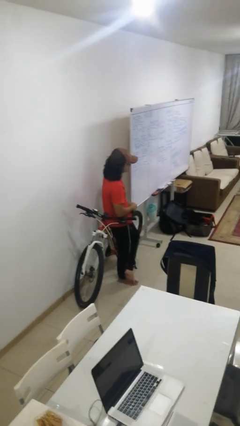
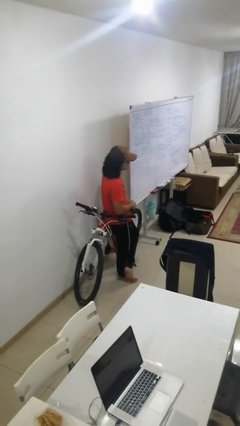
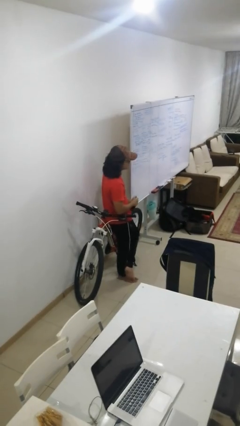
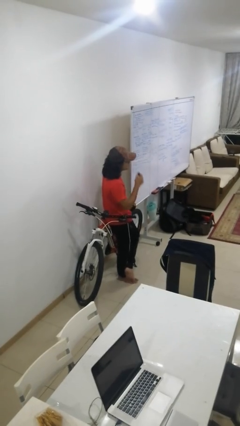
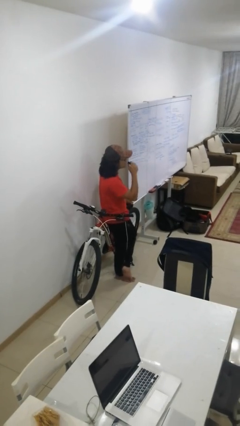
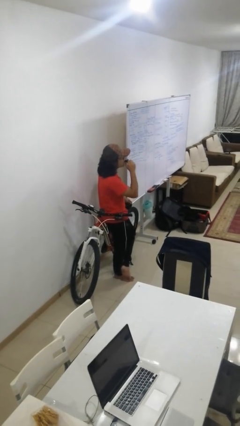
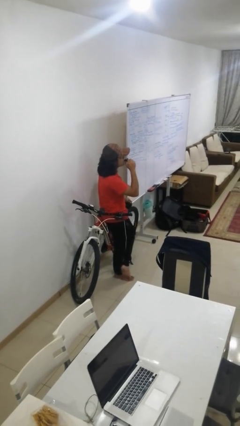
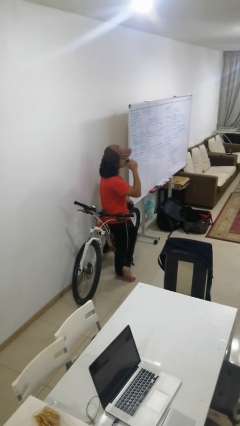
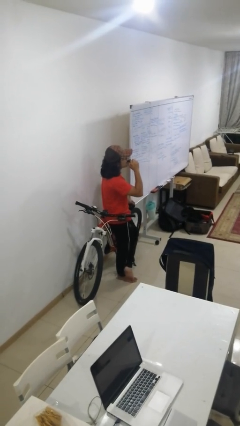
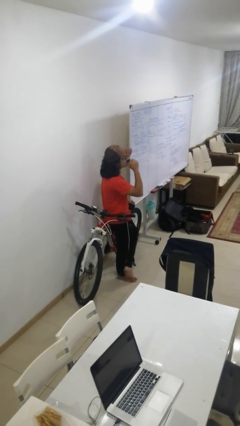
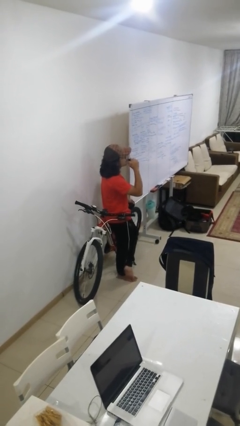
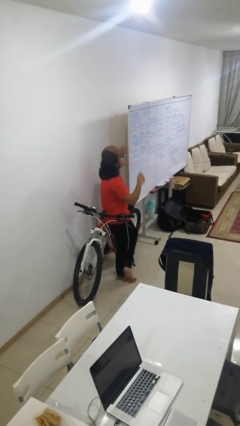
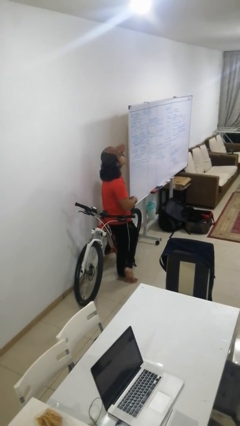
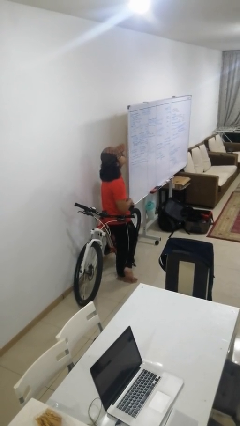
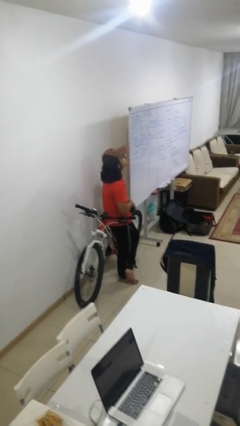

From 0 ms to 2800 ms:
person vapes

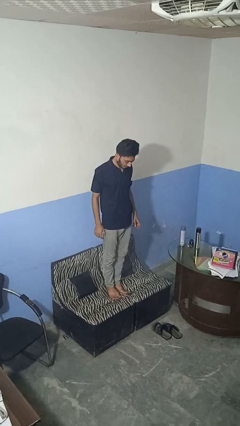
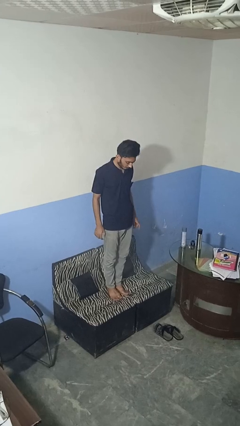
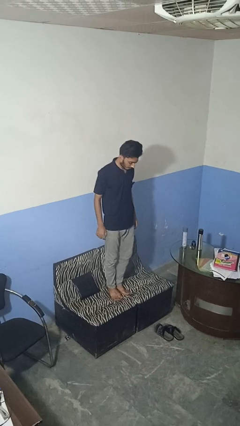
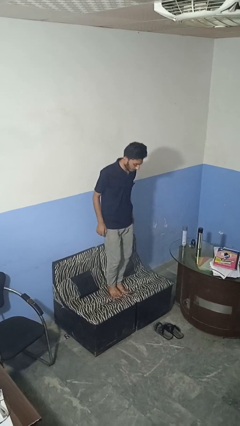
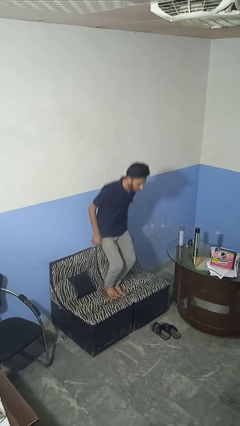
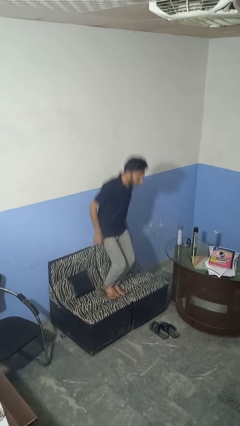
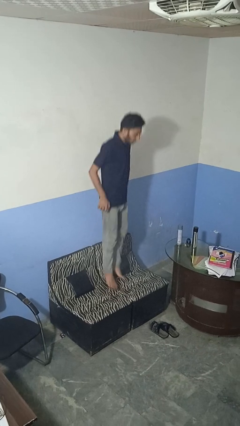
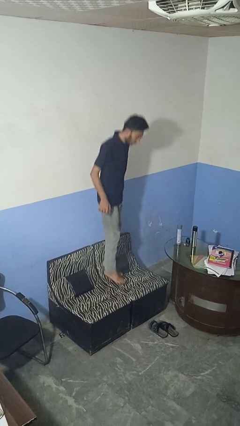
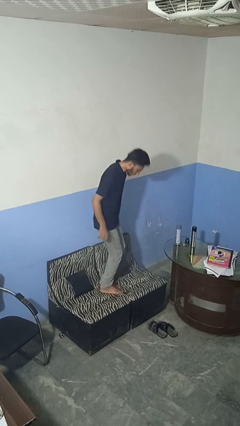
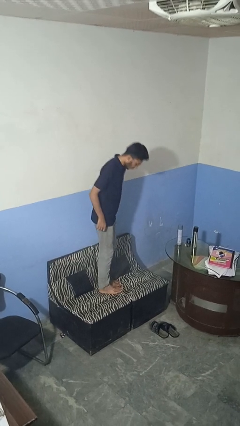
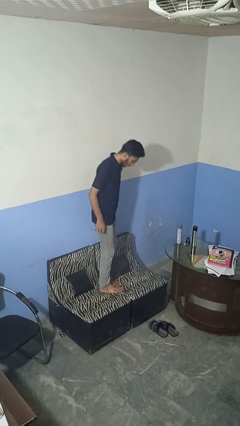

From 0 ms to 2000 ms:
person jumps on couch

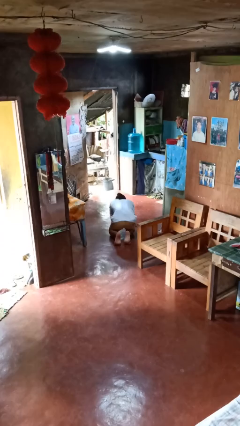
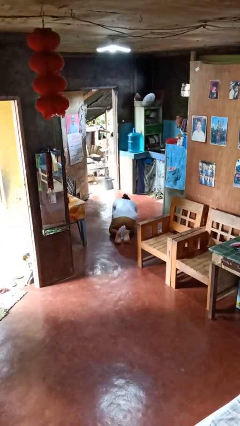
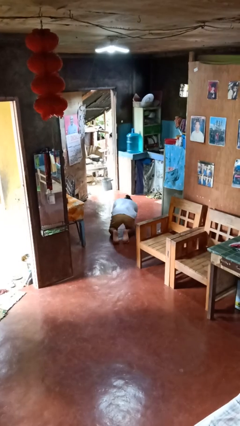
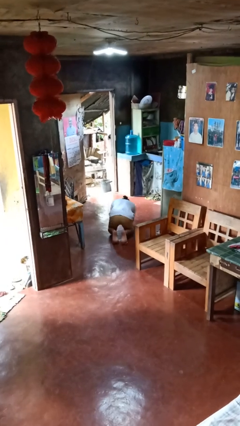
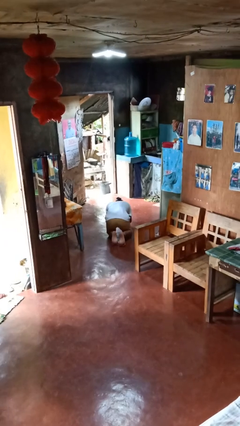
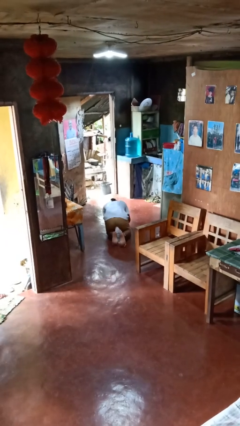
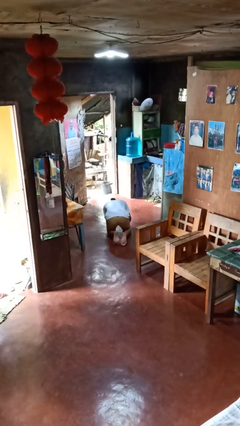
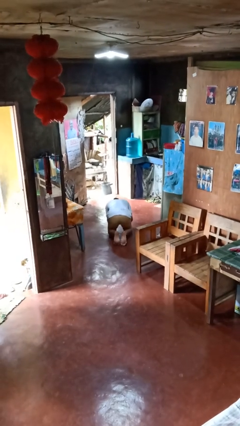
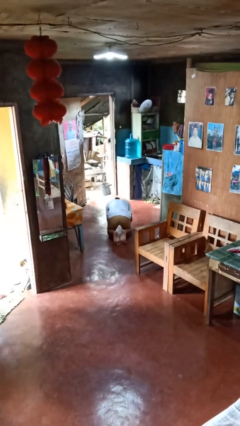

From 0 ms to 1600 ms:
person crawls

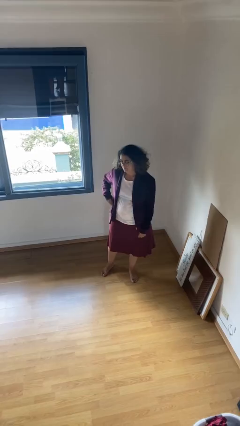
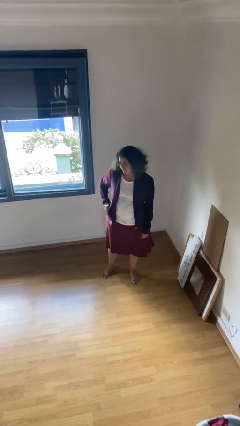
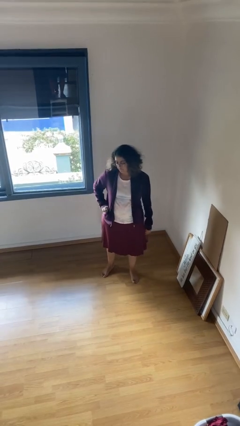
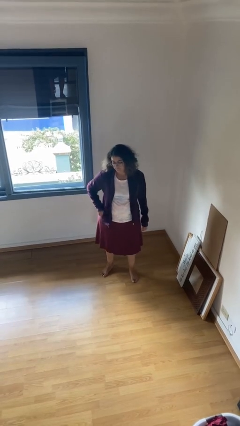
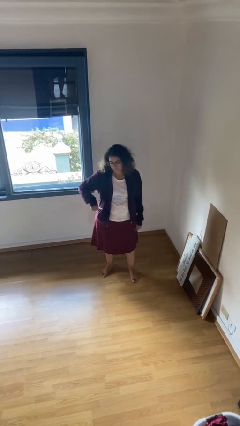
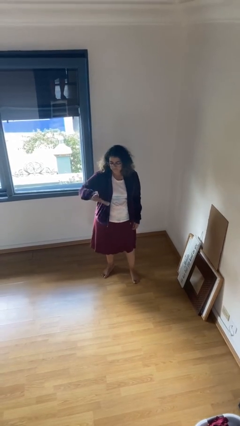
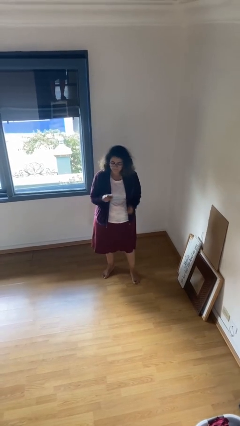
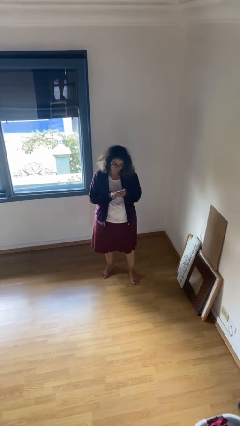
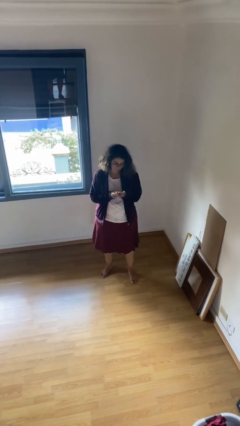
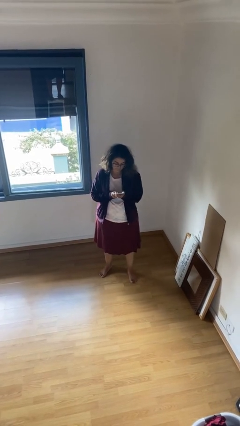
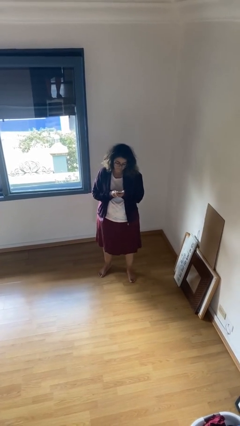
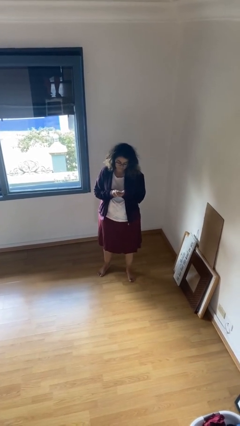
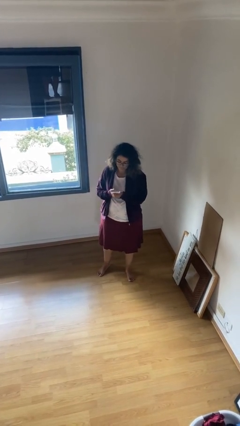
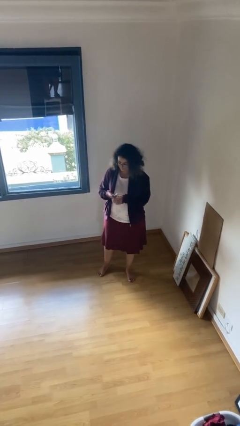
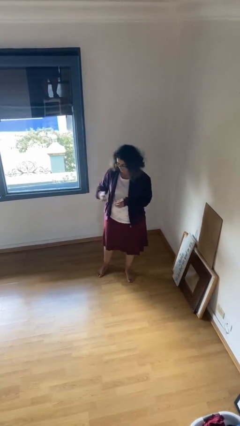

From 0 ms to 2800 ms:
person takes phone from pocket

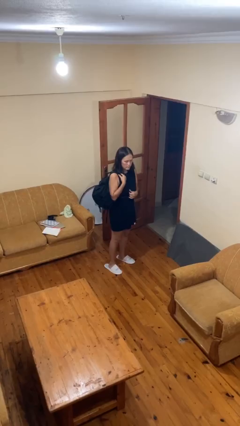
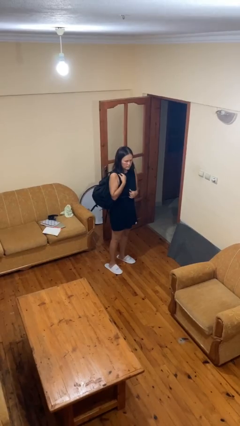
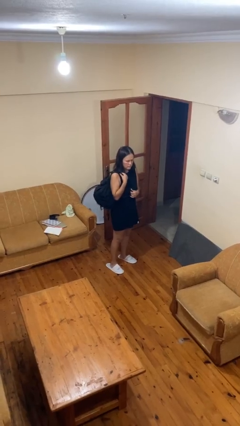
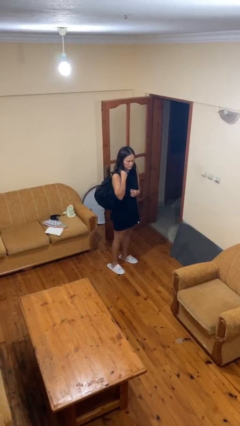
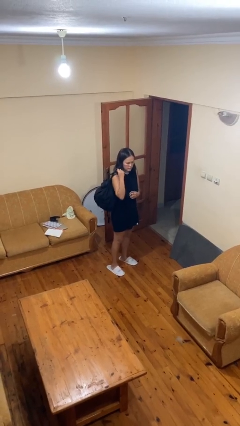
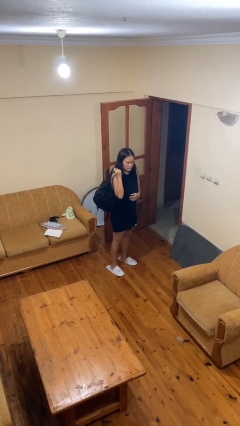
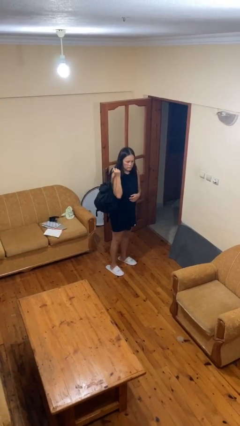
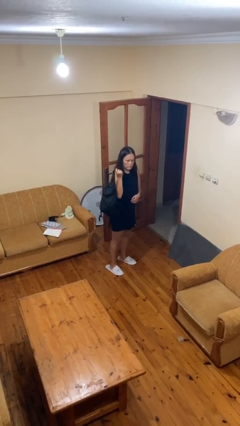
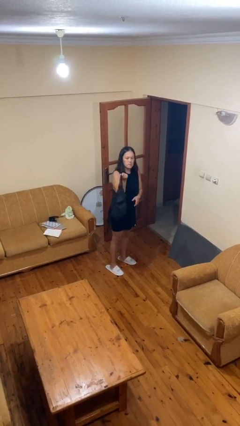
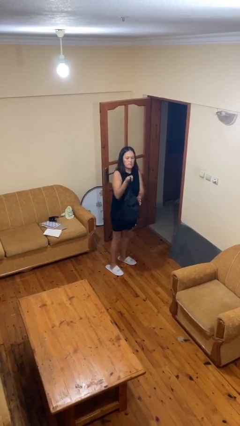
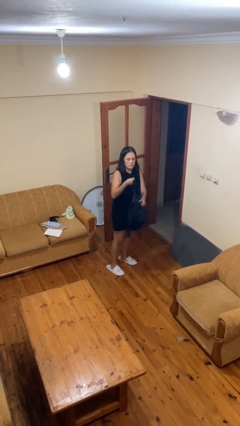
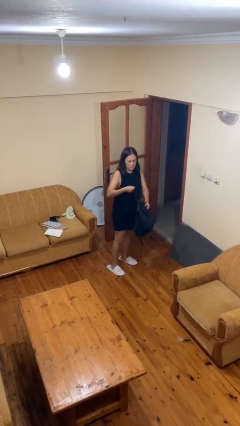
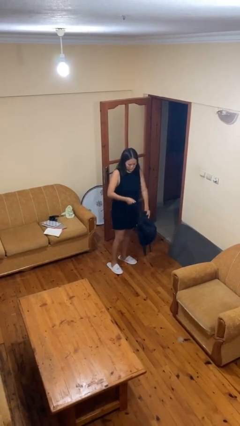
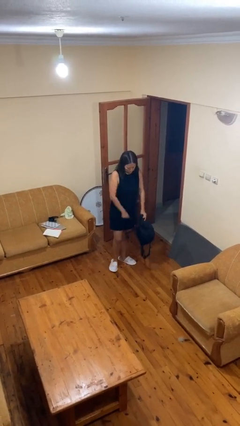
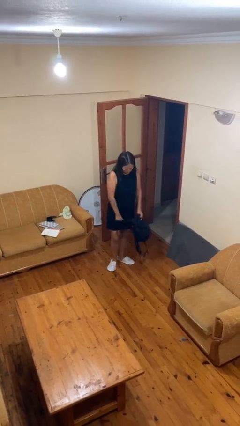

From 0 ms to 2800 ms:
person takes off backpack

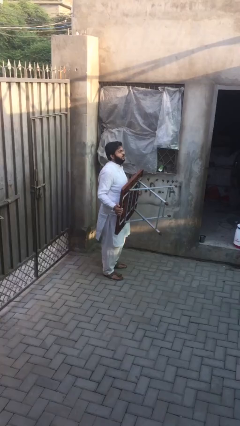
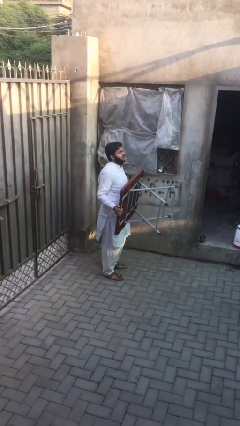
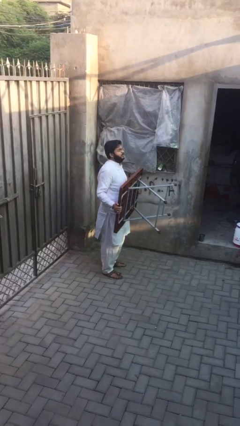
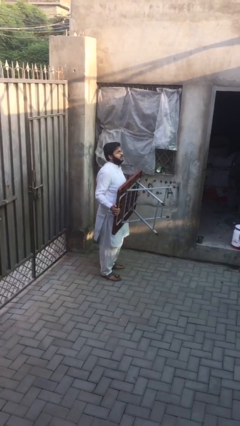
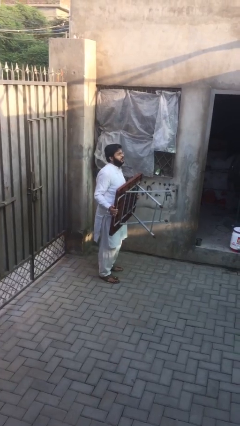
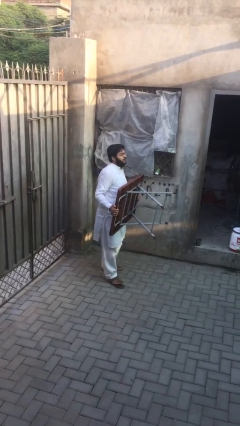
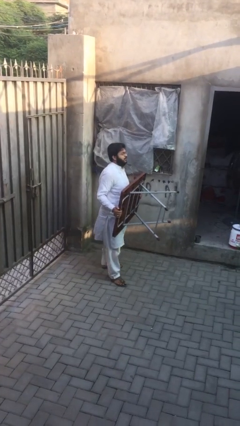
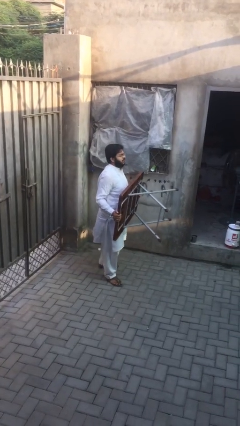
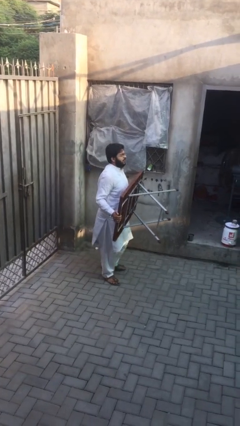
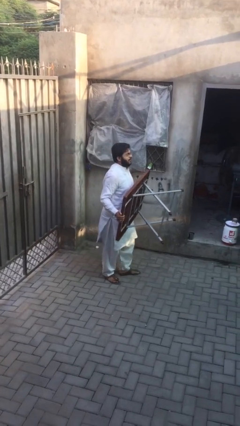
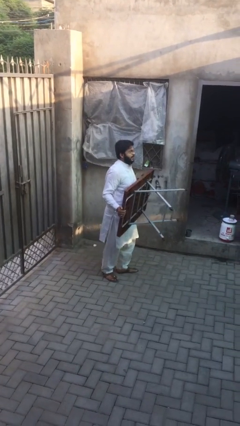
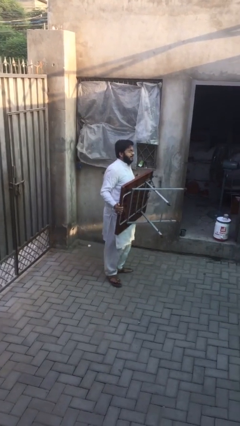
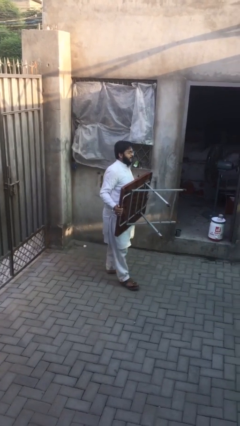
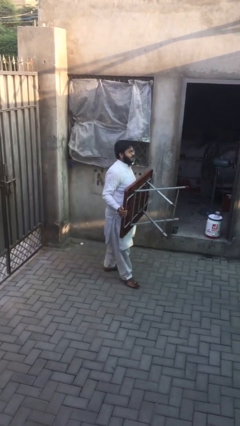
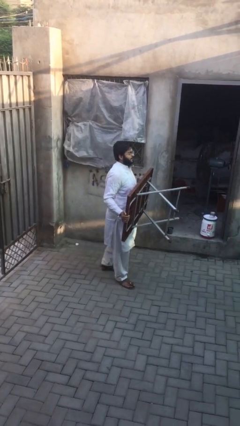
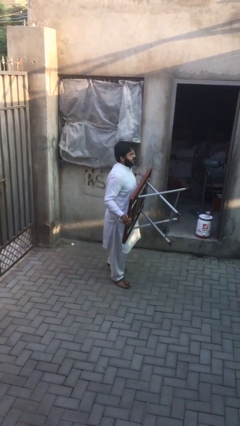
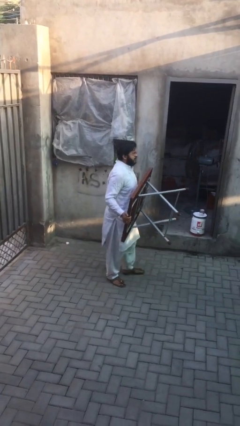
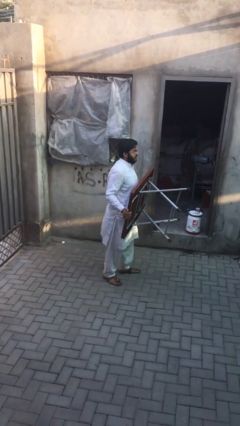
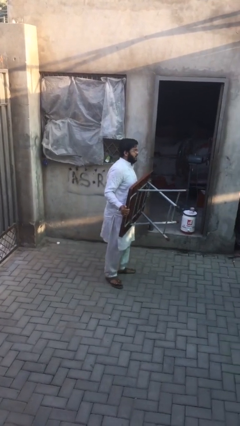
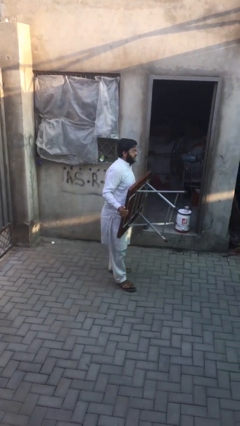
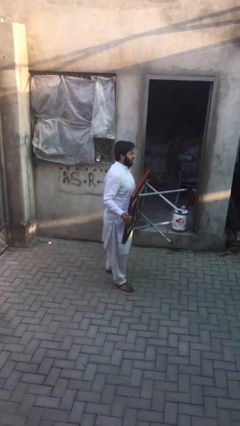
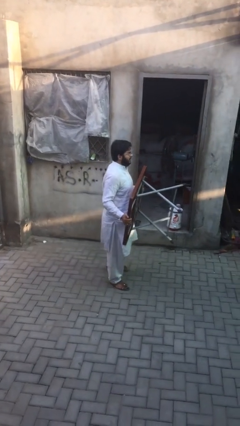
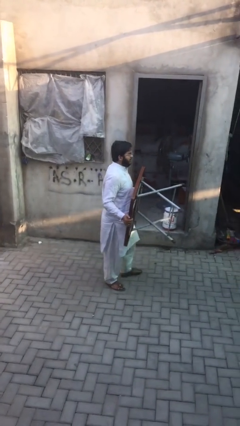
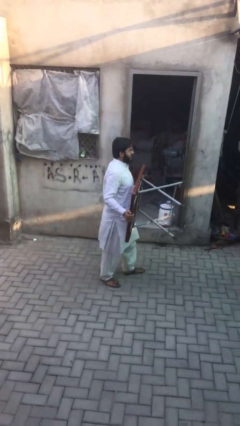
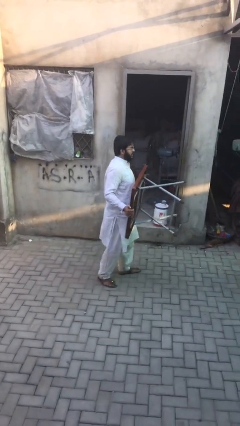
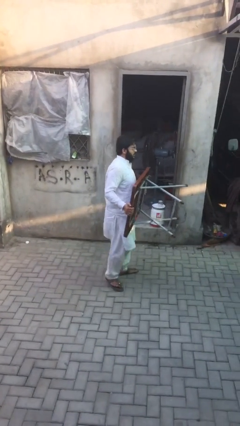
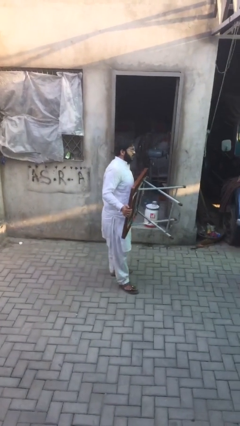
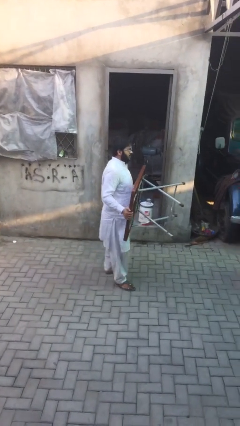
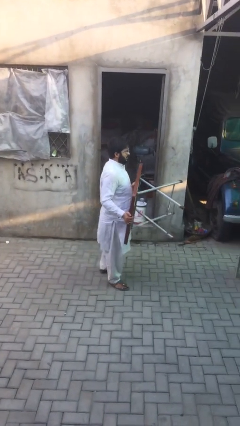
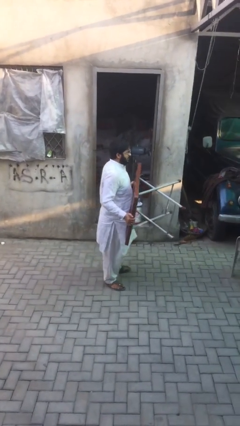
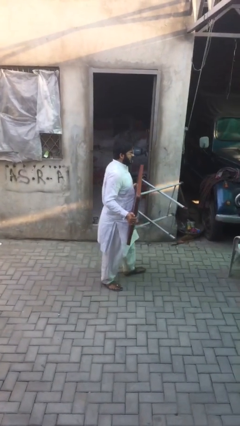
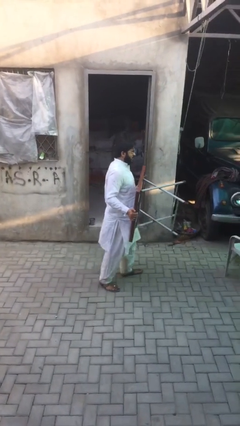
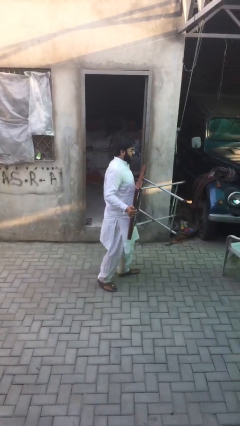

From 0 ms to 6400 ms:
person carries heavy object
